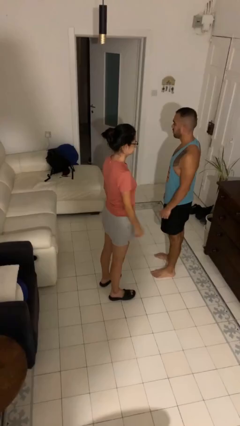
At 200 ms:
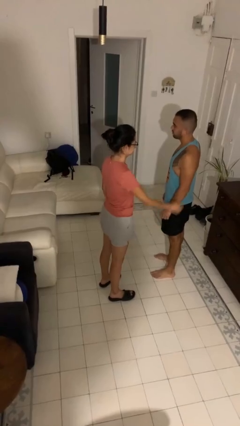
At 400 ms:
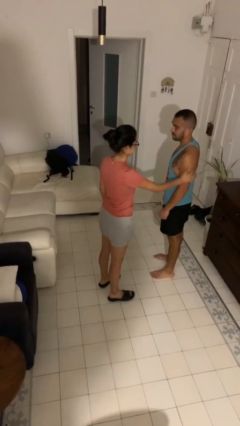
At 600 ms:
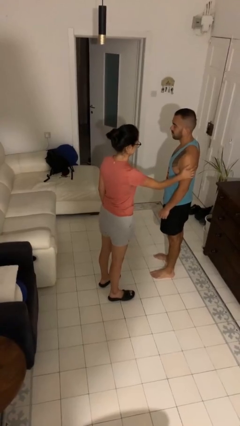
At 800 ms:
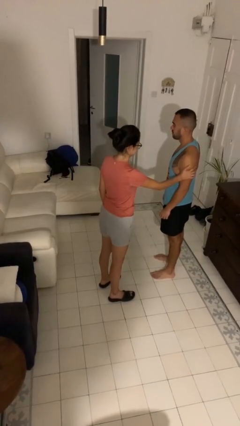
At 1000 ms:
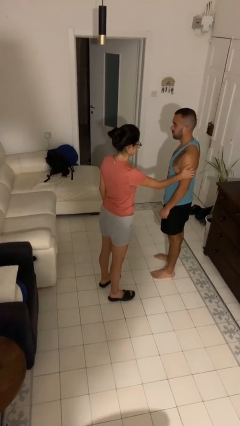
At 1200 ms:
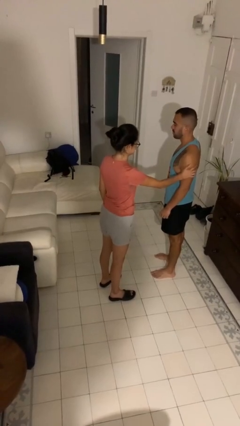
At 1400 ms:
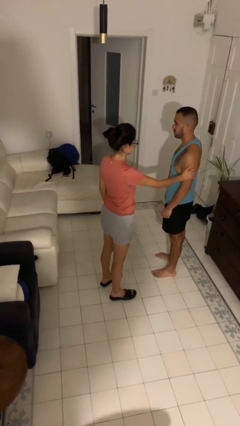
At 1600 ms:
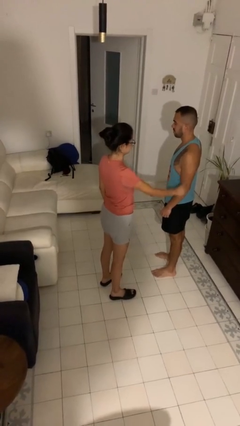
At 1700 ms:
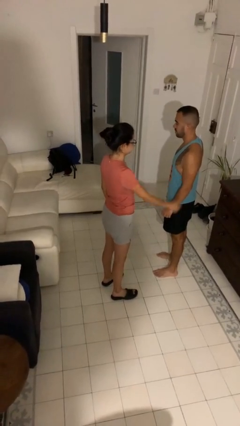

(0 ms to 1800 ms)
person grabs person by bicep

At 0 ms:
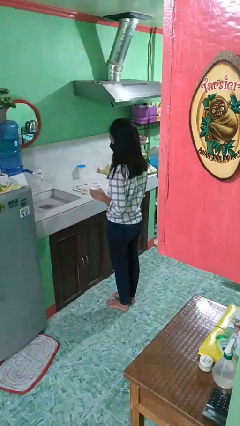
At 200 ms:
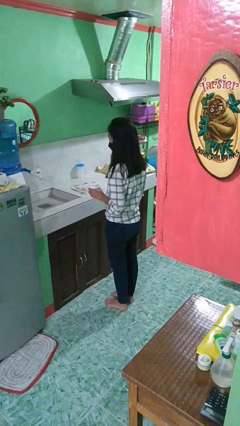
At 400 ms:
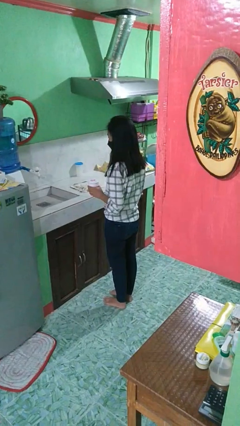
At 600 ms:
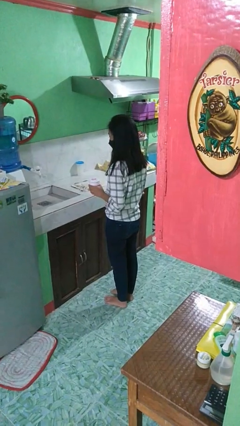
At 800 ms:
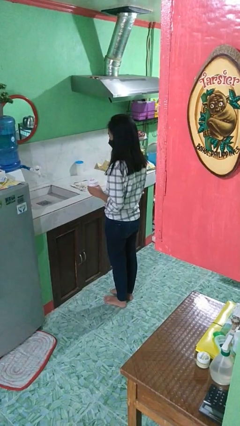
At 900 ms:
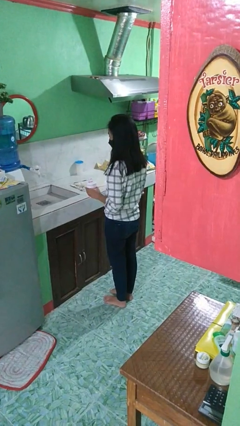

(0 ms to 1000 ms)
person puts down object on countertop

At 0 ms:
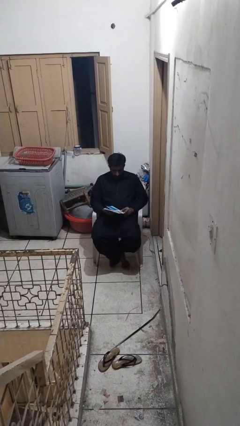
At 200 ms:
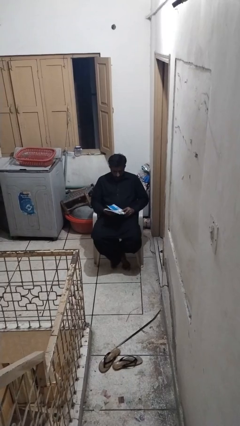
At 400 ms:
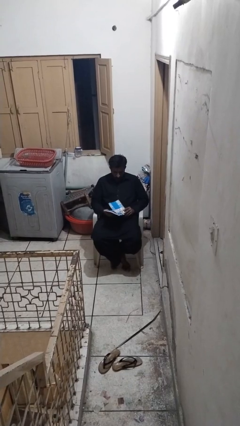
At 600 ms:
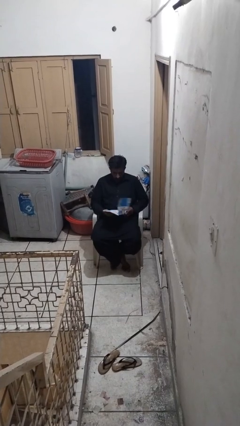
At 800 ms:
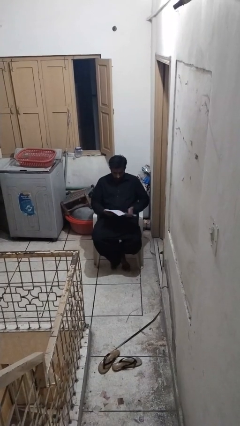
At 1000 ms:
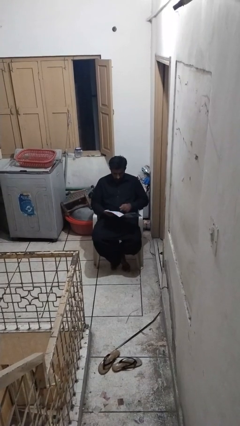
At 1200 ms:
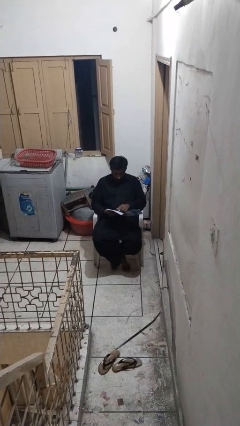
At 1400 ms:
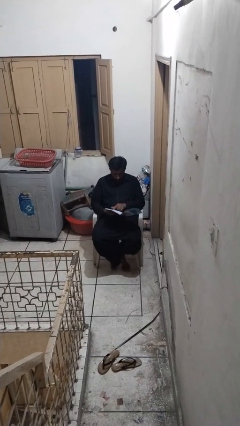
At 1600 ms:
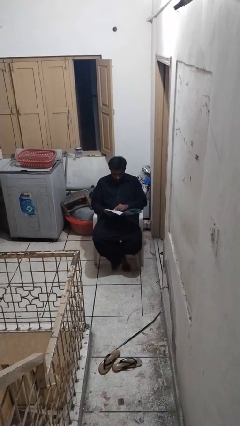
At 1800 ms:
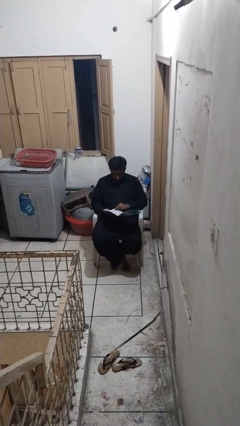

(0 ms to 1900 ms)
person reads book

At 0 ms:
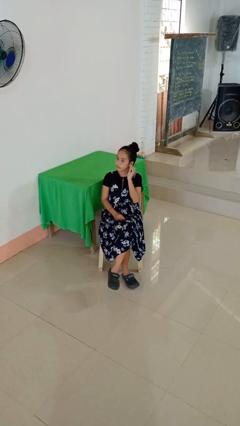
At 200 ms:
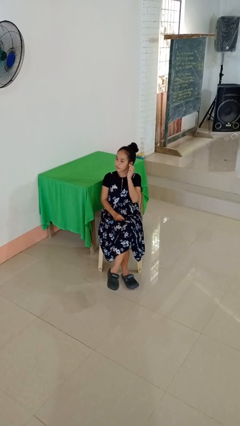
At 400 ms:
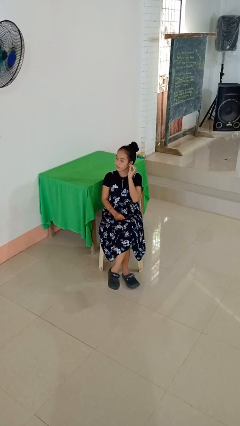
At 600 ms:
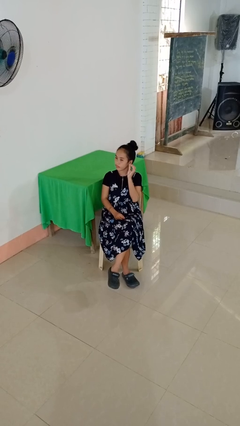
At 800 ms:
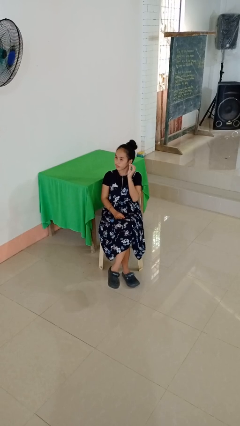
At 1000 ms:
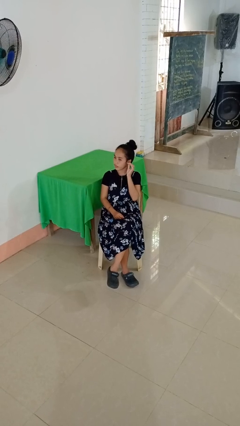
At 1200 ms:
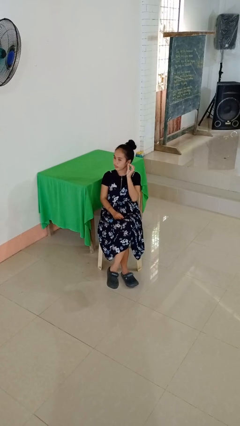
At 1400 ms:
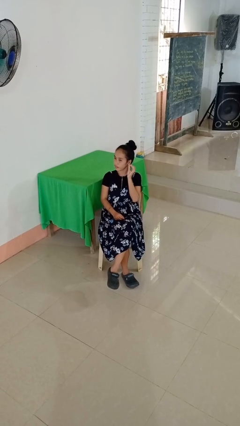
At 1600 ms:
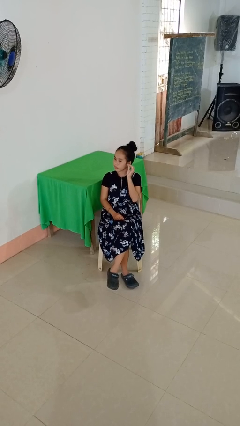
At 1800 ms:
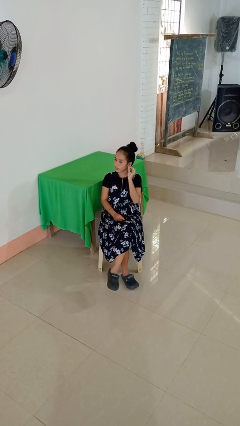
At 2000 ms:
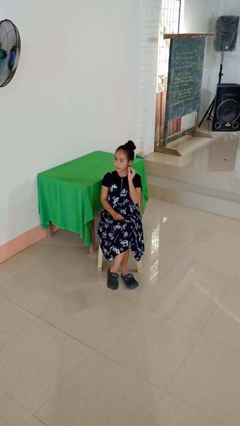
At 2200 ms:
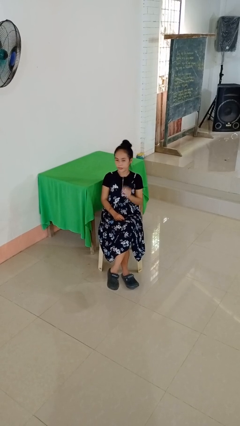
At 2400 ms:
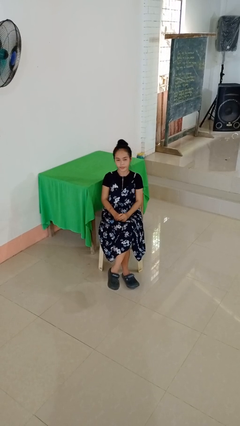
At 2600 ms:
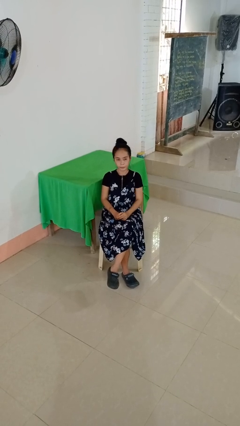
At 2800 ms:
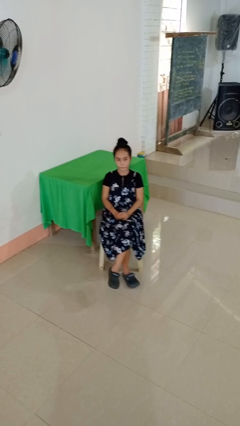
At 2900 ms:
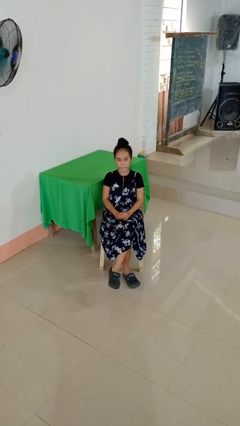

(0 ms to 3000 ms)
person touches earlobe

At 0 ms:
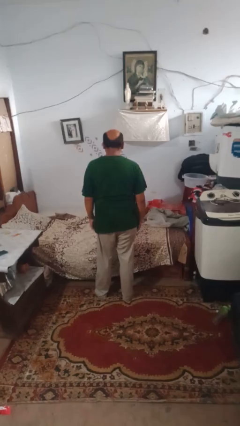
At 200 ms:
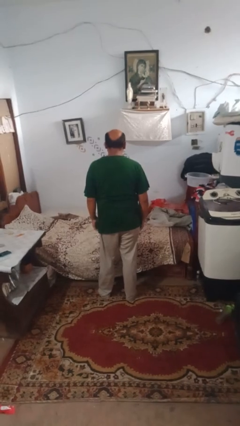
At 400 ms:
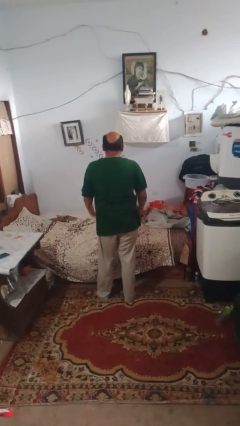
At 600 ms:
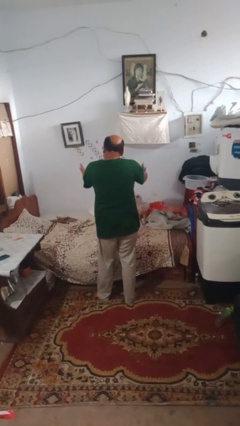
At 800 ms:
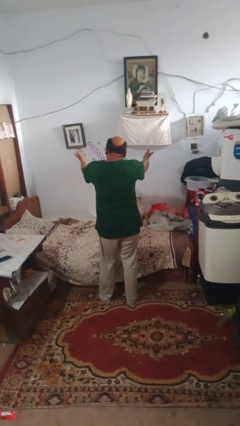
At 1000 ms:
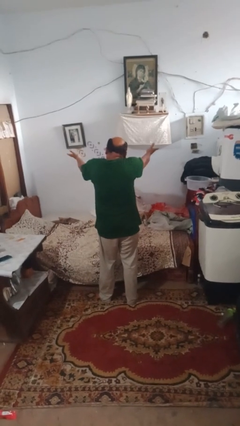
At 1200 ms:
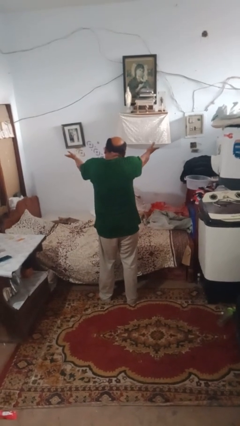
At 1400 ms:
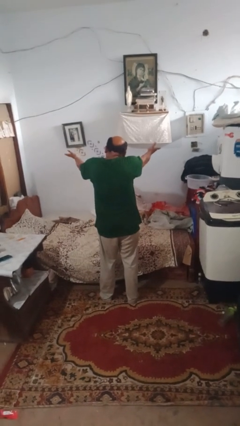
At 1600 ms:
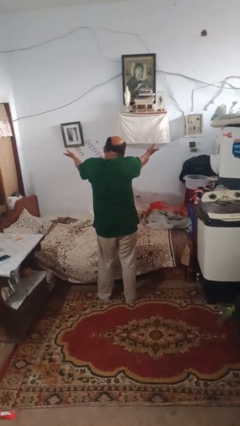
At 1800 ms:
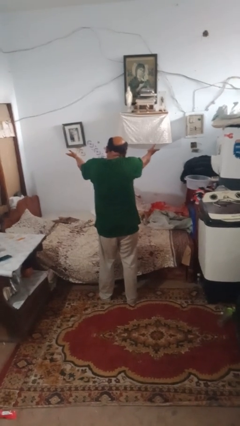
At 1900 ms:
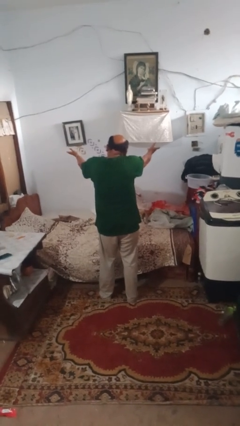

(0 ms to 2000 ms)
person shrugs

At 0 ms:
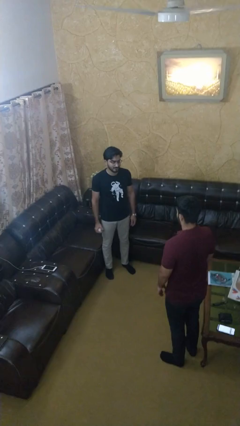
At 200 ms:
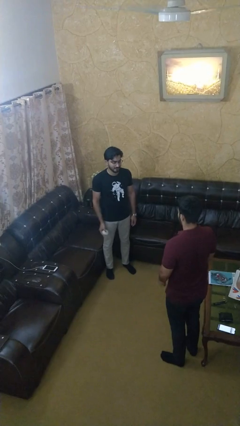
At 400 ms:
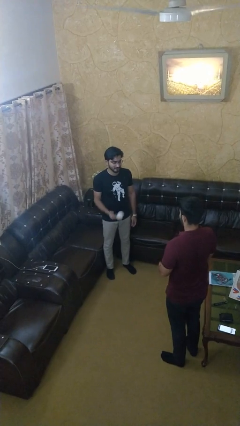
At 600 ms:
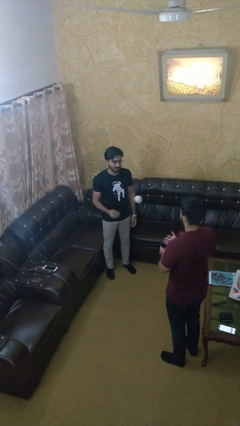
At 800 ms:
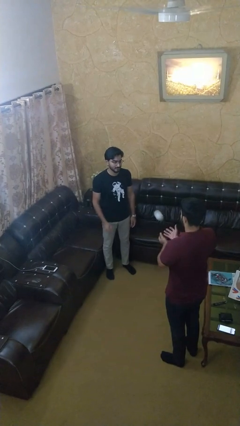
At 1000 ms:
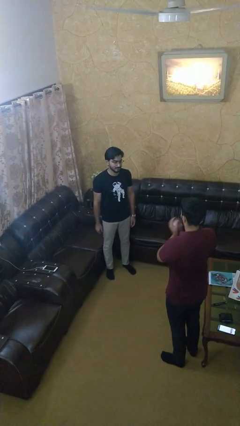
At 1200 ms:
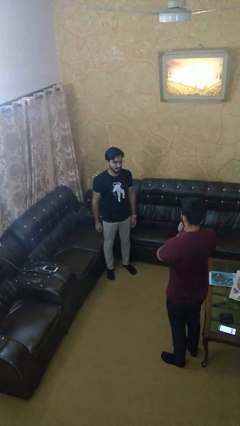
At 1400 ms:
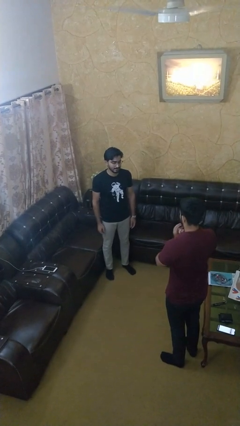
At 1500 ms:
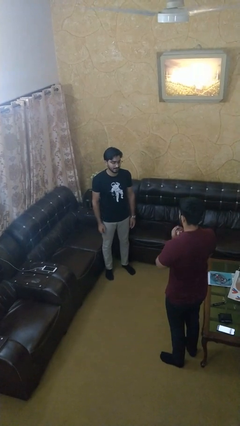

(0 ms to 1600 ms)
person throws object to person

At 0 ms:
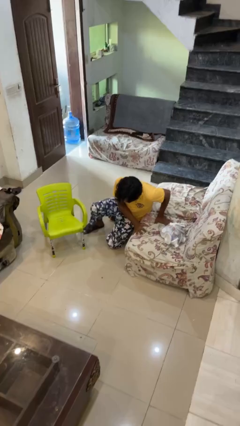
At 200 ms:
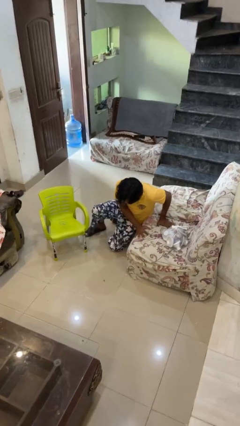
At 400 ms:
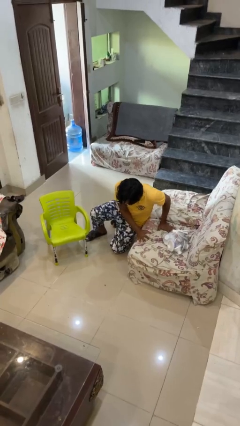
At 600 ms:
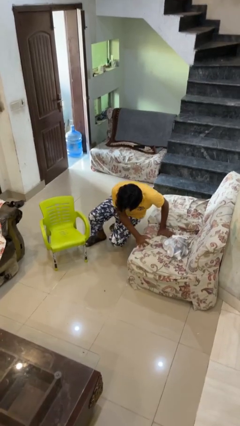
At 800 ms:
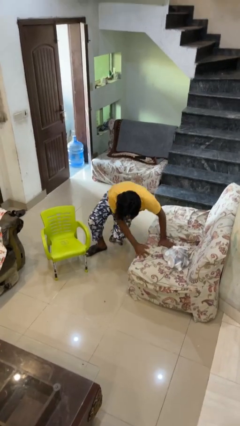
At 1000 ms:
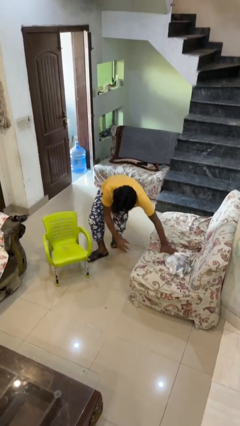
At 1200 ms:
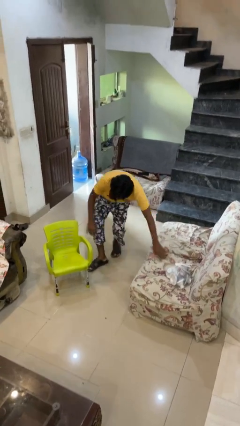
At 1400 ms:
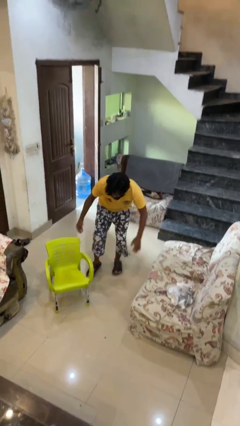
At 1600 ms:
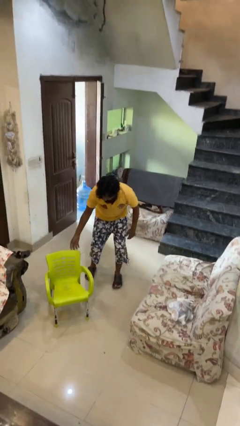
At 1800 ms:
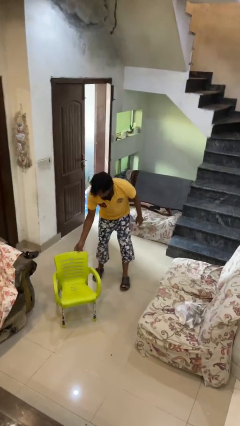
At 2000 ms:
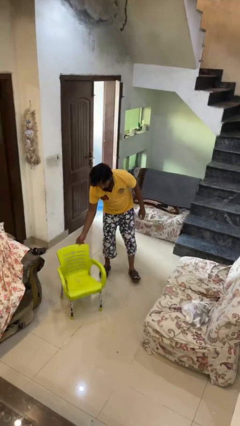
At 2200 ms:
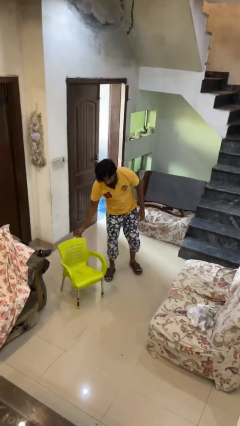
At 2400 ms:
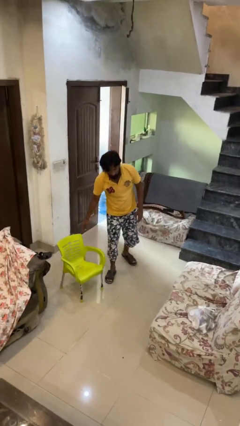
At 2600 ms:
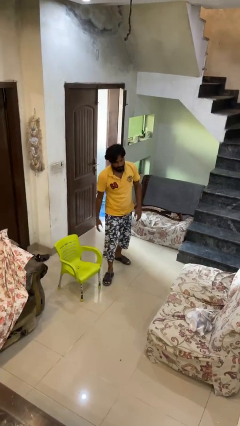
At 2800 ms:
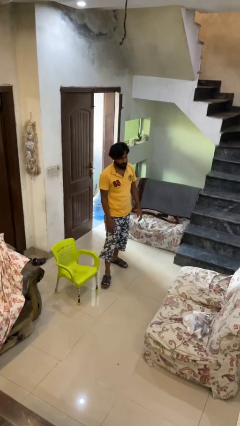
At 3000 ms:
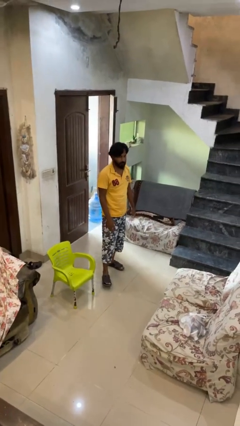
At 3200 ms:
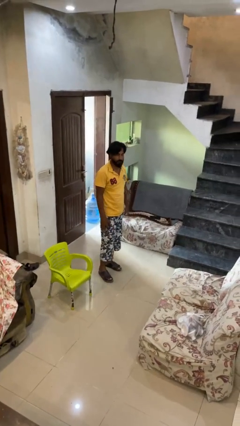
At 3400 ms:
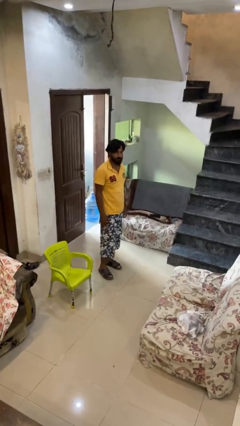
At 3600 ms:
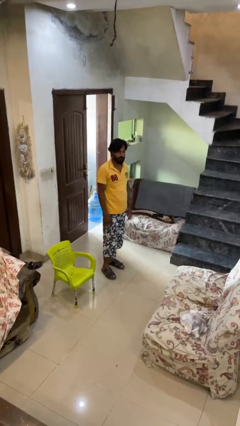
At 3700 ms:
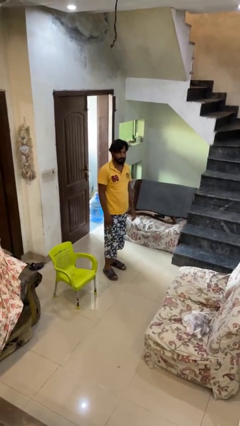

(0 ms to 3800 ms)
person stands up from floor

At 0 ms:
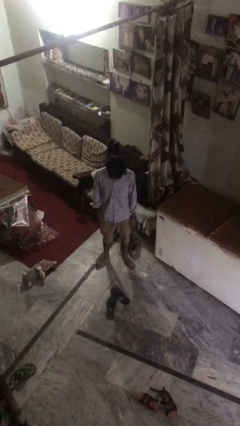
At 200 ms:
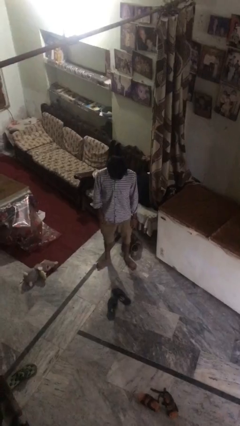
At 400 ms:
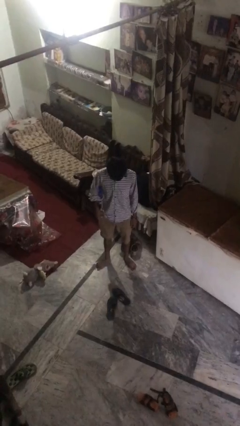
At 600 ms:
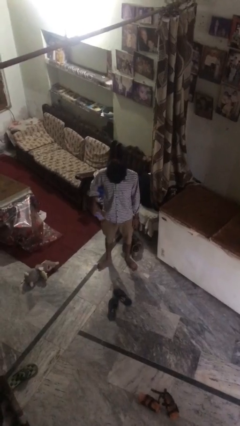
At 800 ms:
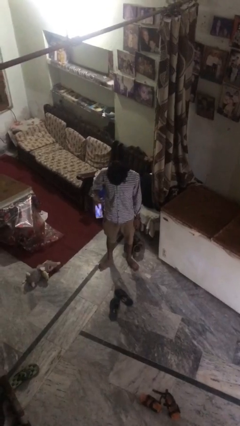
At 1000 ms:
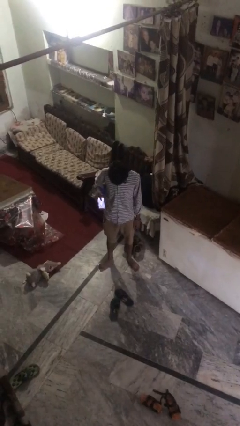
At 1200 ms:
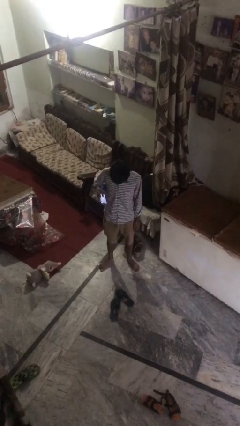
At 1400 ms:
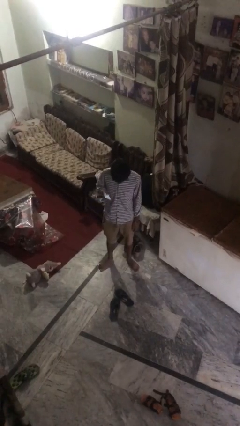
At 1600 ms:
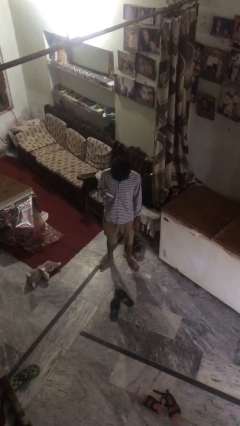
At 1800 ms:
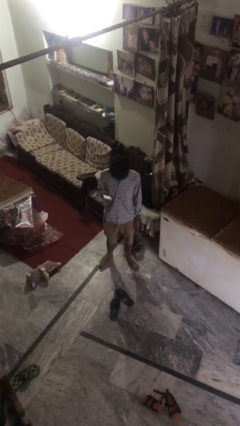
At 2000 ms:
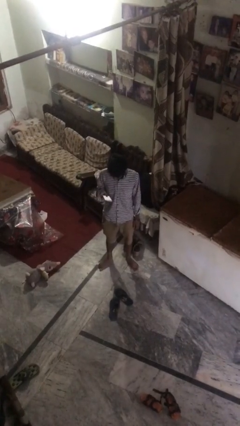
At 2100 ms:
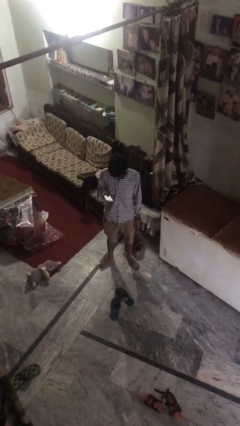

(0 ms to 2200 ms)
person takes phone from pocket
